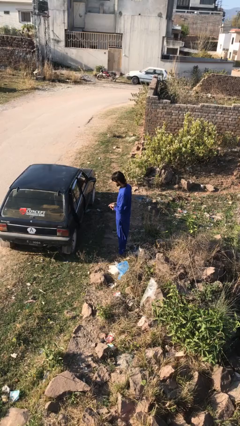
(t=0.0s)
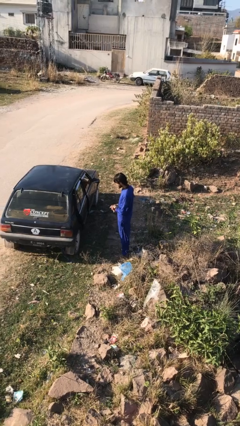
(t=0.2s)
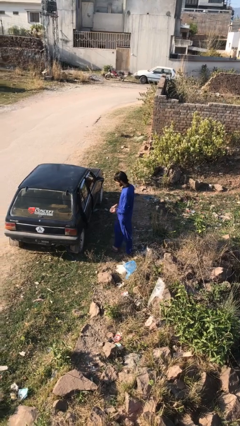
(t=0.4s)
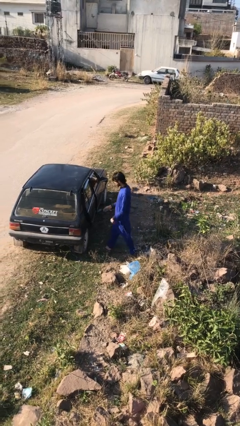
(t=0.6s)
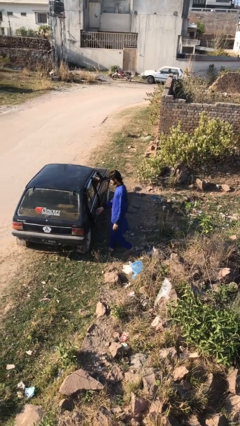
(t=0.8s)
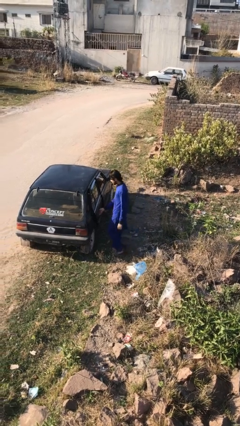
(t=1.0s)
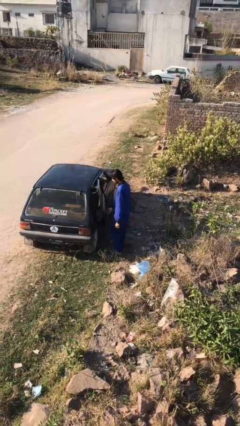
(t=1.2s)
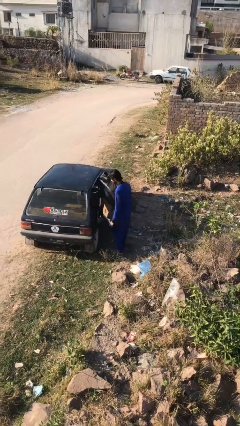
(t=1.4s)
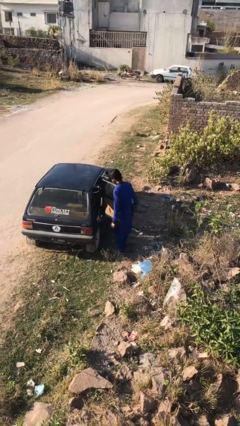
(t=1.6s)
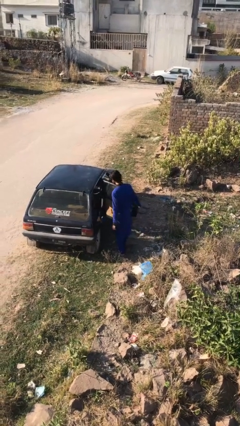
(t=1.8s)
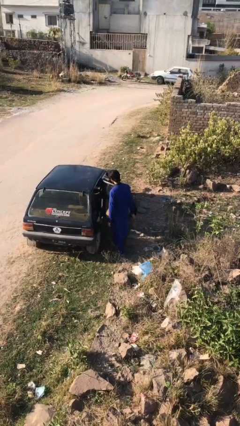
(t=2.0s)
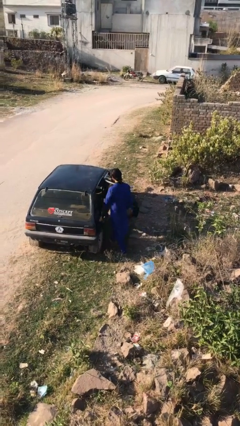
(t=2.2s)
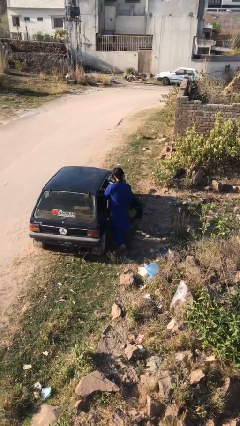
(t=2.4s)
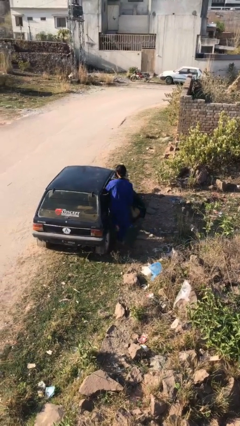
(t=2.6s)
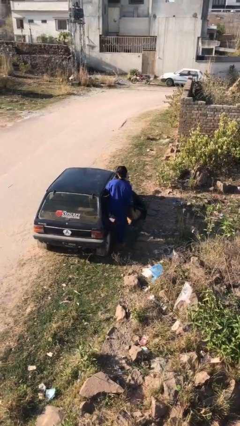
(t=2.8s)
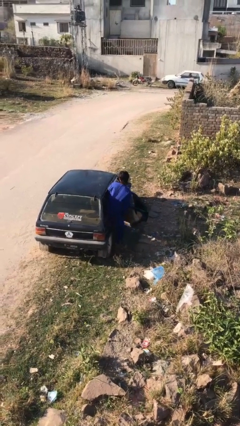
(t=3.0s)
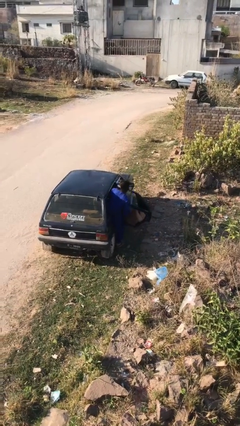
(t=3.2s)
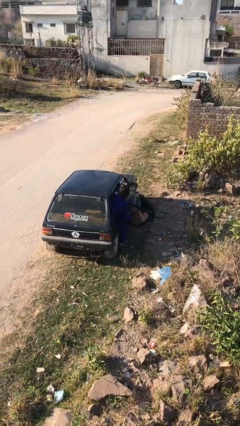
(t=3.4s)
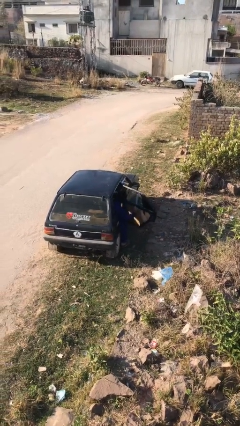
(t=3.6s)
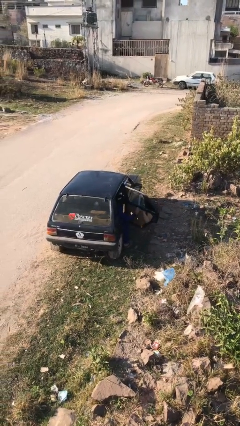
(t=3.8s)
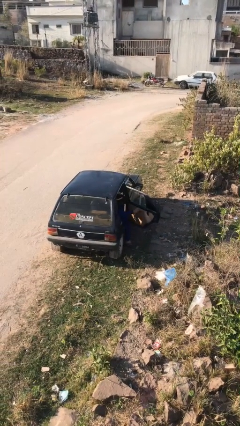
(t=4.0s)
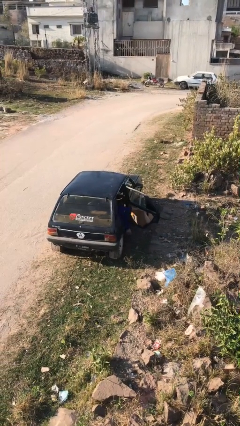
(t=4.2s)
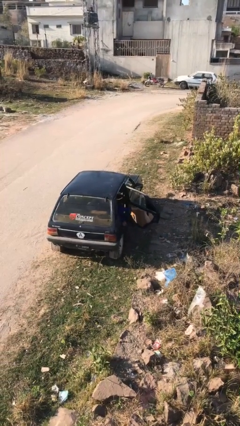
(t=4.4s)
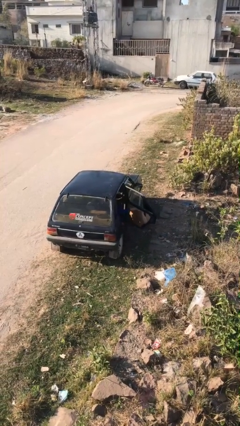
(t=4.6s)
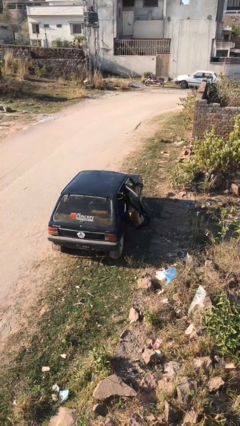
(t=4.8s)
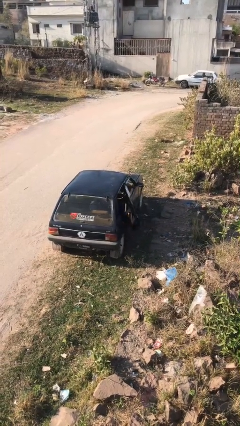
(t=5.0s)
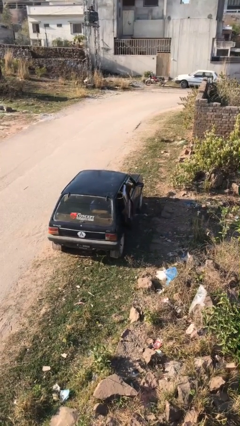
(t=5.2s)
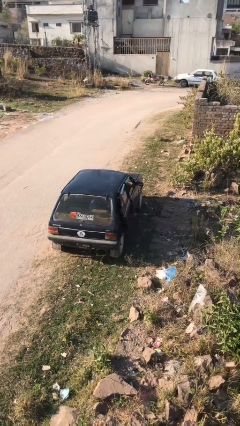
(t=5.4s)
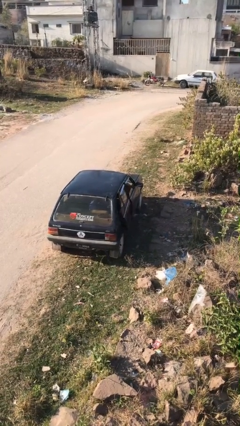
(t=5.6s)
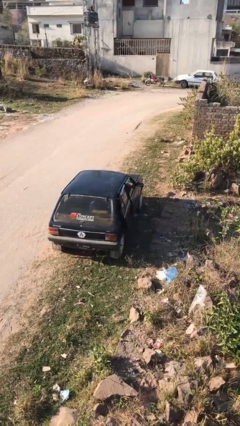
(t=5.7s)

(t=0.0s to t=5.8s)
car picks up person

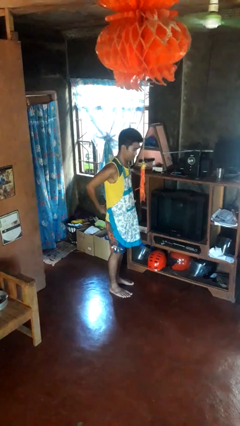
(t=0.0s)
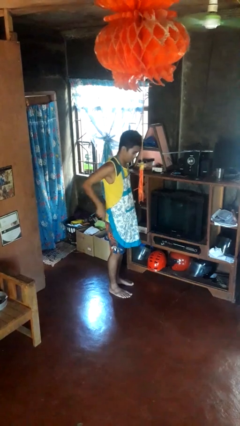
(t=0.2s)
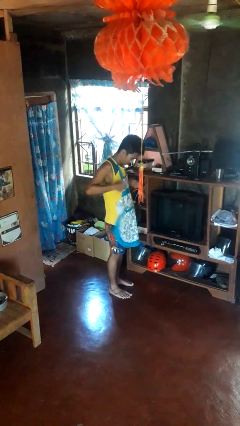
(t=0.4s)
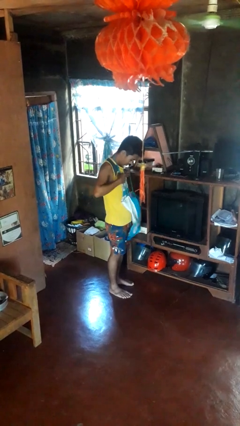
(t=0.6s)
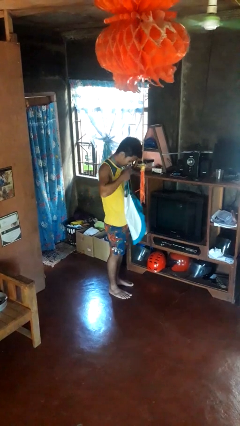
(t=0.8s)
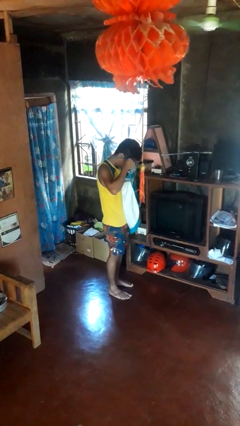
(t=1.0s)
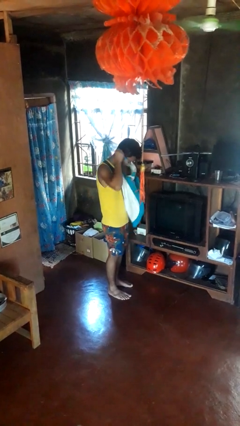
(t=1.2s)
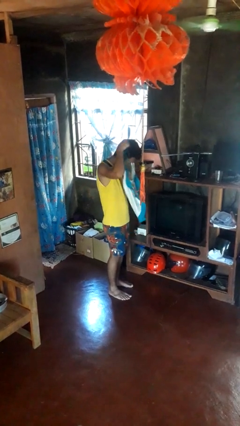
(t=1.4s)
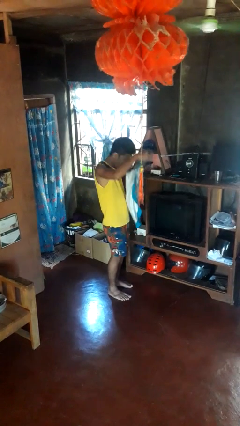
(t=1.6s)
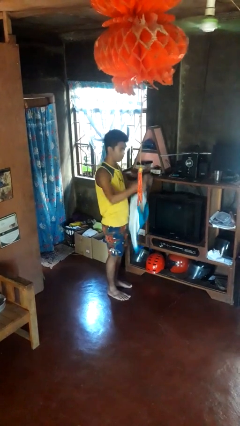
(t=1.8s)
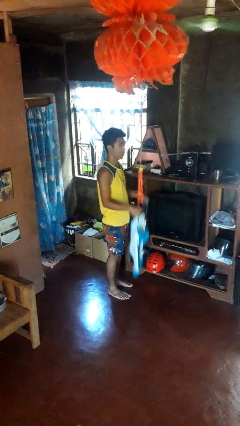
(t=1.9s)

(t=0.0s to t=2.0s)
person takes off apron

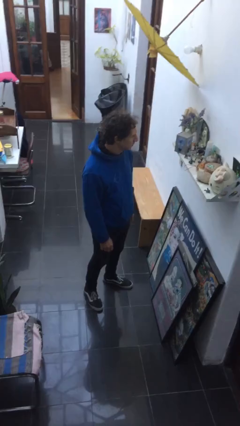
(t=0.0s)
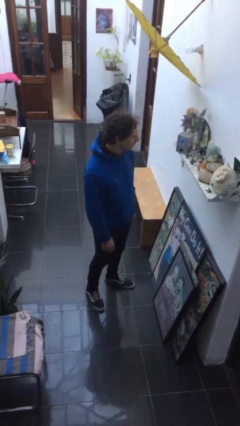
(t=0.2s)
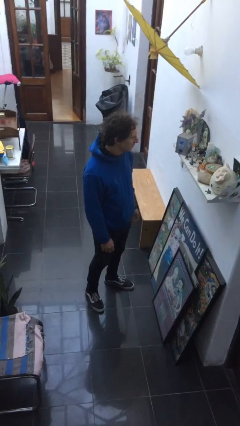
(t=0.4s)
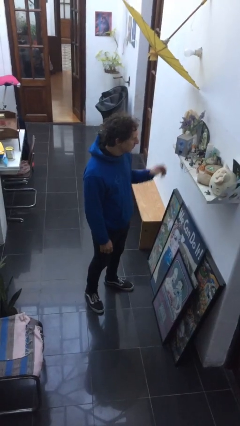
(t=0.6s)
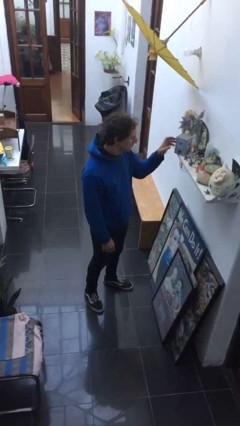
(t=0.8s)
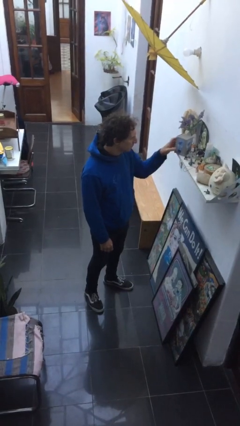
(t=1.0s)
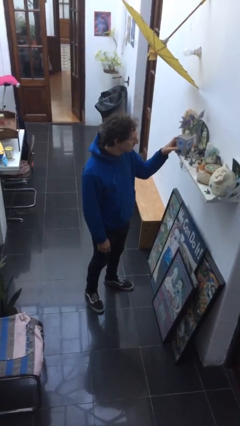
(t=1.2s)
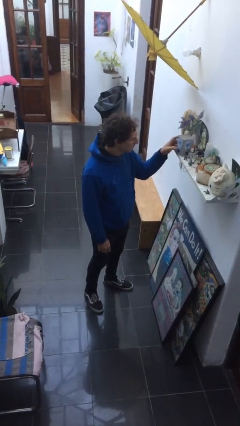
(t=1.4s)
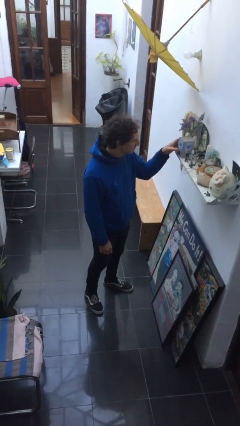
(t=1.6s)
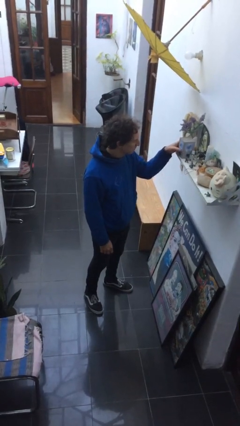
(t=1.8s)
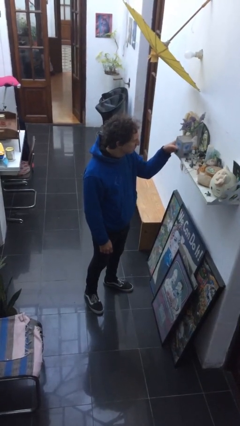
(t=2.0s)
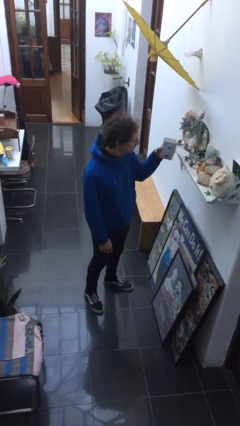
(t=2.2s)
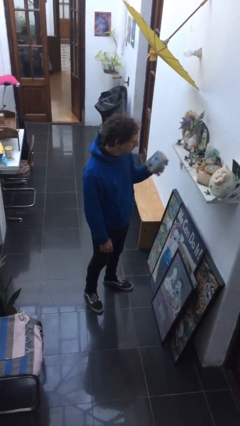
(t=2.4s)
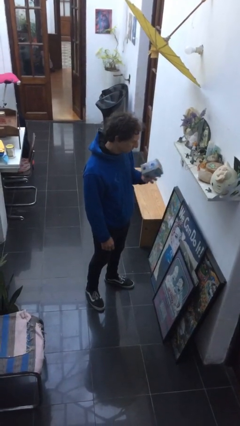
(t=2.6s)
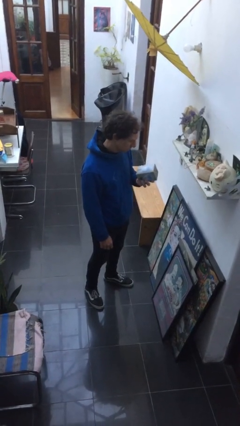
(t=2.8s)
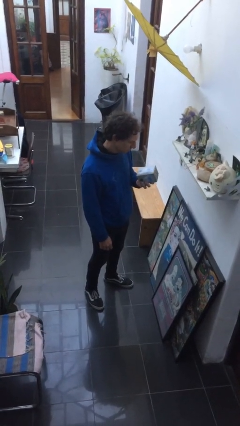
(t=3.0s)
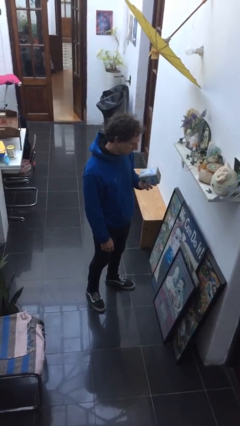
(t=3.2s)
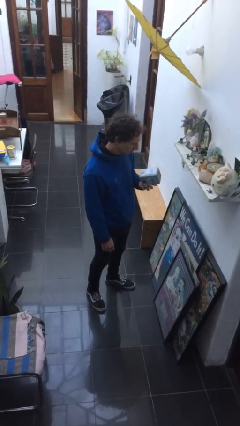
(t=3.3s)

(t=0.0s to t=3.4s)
person picks up object from countertop

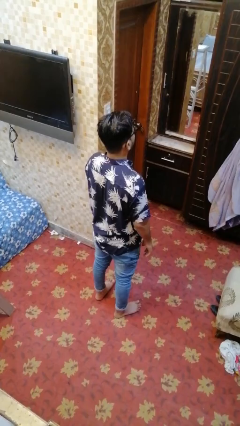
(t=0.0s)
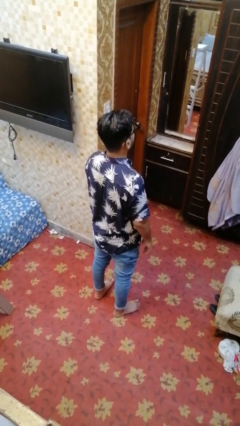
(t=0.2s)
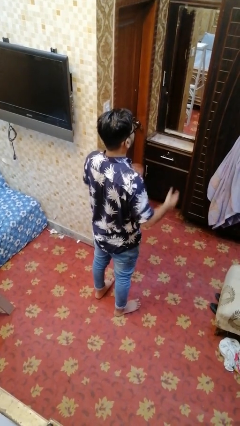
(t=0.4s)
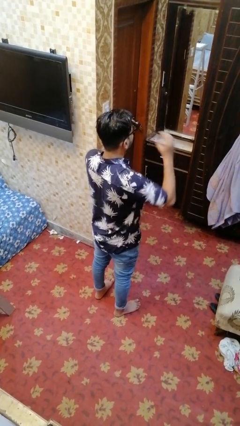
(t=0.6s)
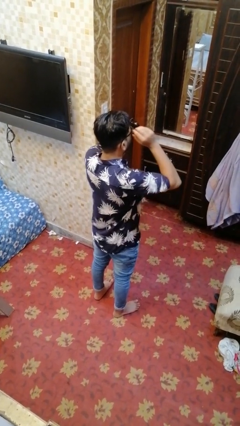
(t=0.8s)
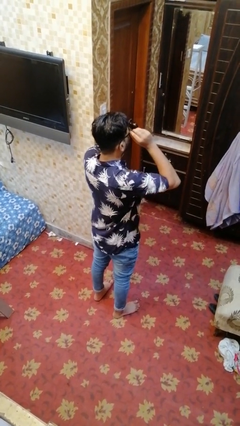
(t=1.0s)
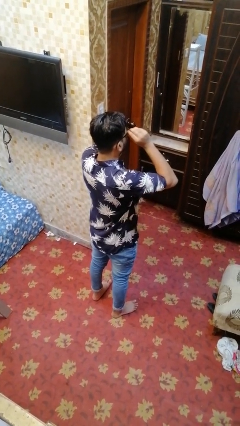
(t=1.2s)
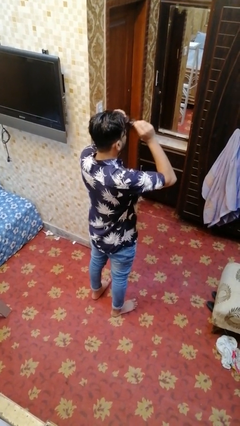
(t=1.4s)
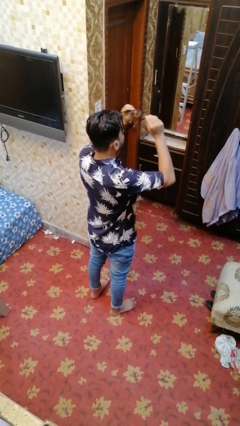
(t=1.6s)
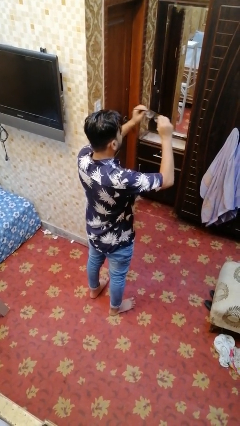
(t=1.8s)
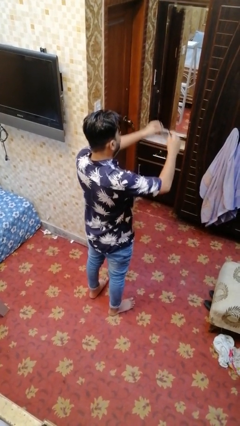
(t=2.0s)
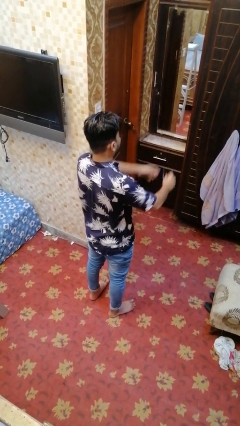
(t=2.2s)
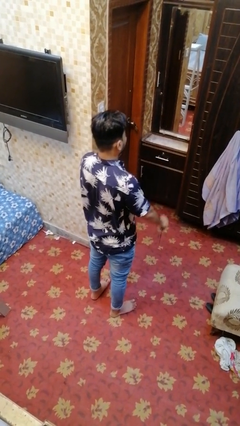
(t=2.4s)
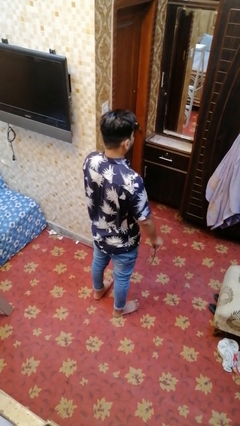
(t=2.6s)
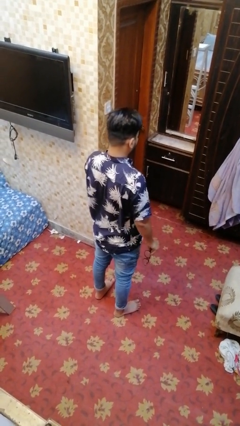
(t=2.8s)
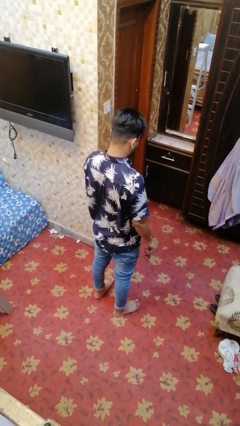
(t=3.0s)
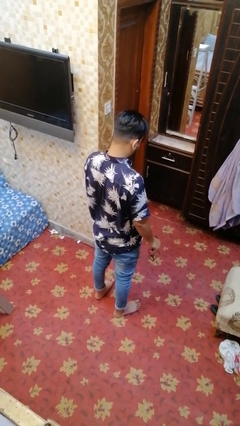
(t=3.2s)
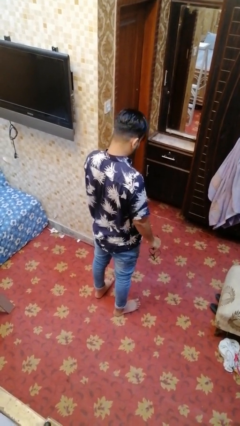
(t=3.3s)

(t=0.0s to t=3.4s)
person takes off glasses

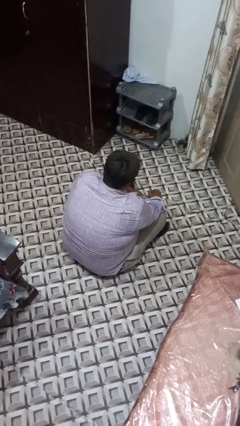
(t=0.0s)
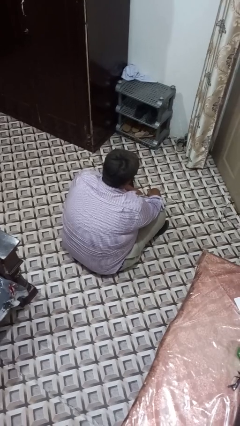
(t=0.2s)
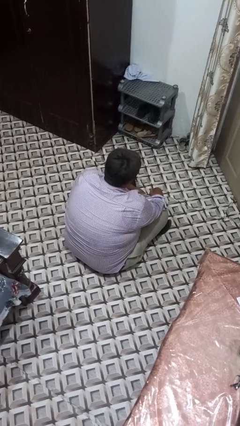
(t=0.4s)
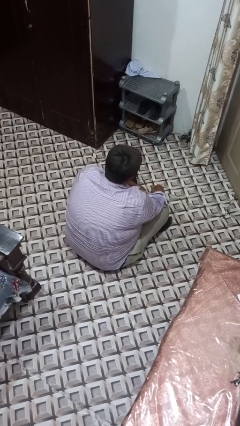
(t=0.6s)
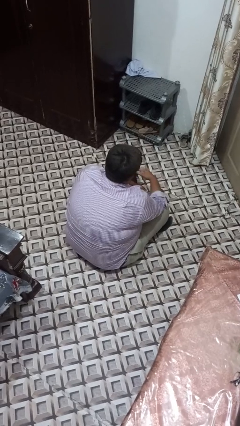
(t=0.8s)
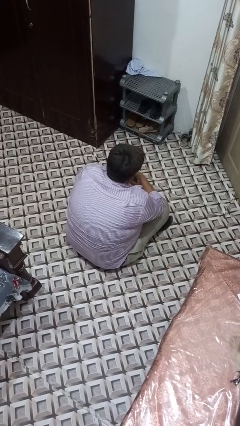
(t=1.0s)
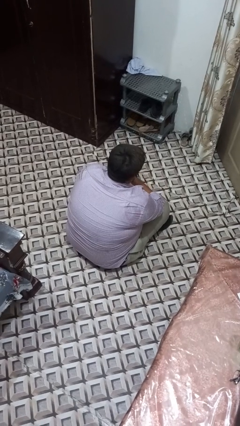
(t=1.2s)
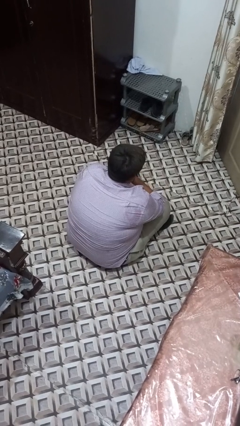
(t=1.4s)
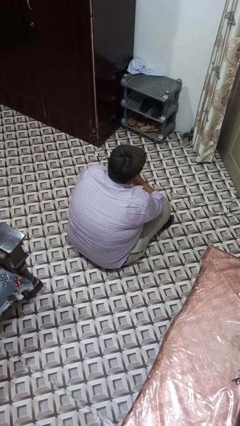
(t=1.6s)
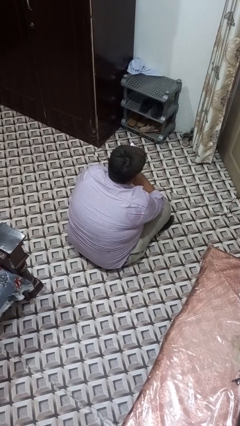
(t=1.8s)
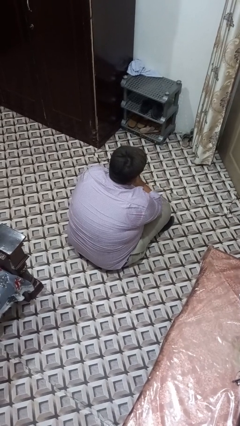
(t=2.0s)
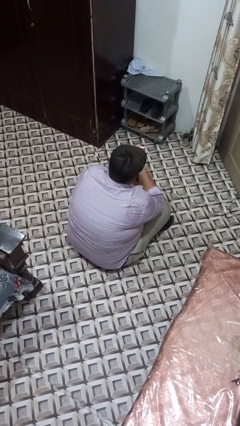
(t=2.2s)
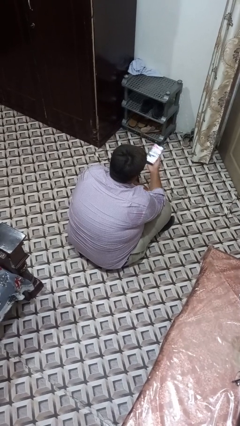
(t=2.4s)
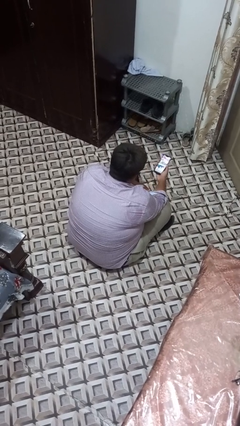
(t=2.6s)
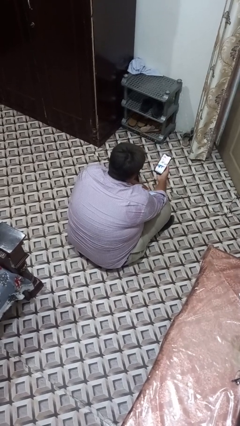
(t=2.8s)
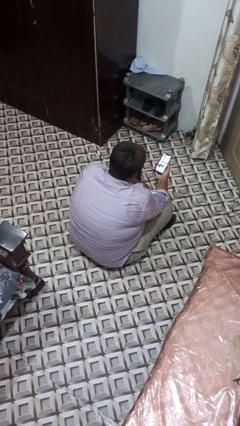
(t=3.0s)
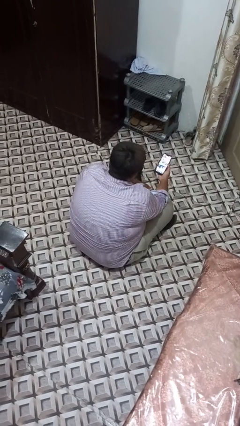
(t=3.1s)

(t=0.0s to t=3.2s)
person takes phone from pocket
